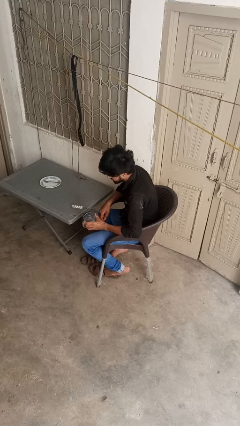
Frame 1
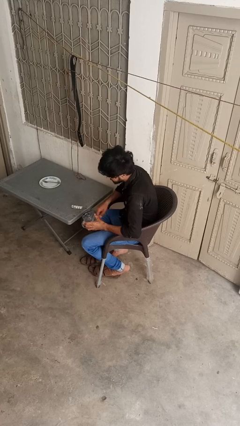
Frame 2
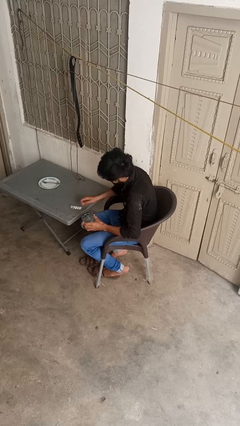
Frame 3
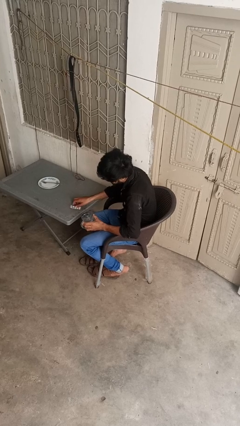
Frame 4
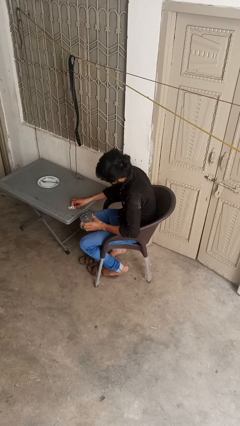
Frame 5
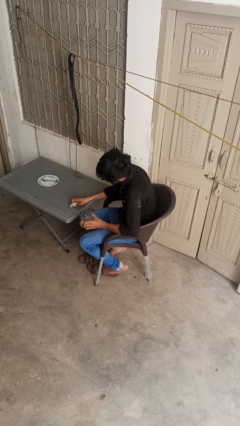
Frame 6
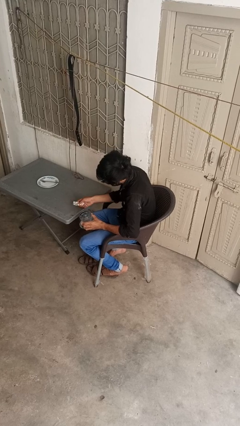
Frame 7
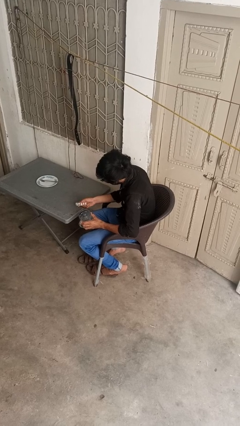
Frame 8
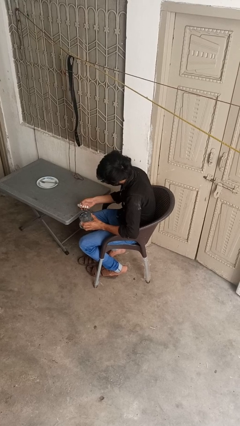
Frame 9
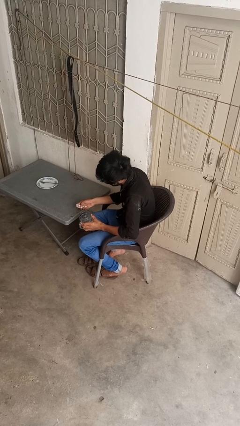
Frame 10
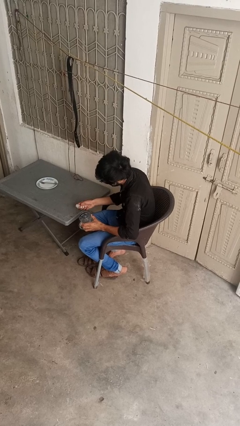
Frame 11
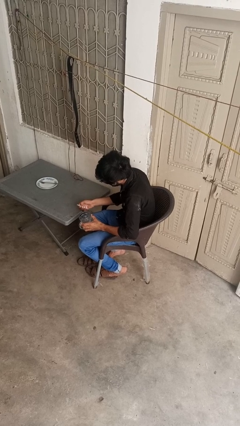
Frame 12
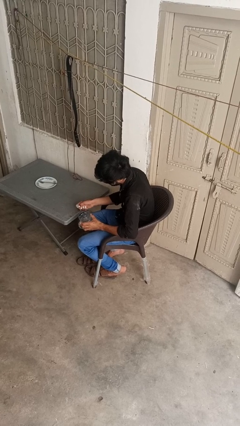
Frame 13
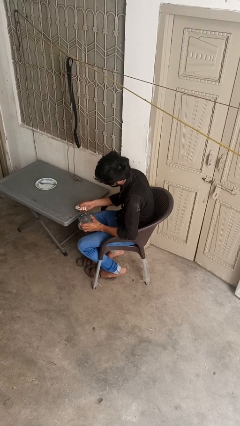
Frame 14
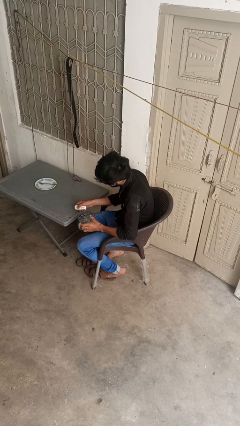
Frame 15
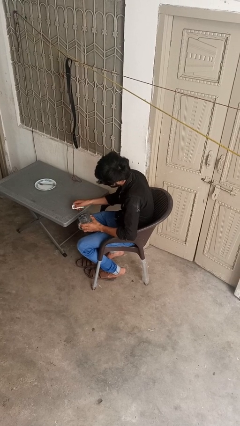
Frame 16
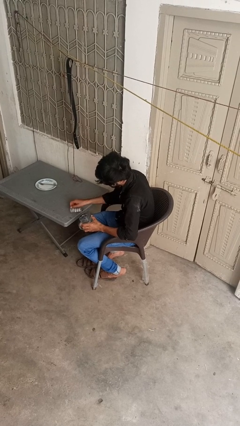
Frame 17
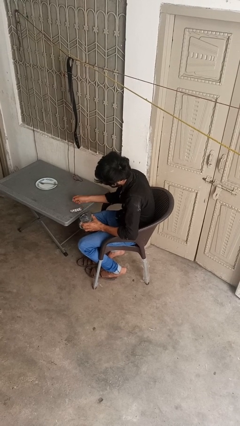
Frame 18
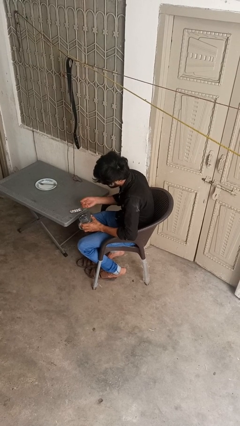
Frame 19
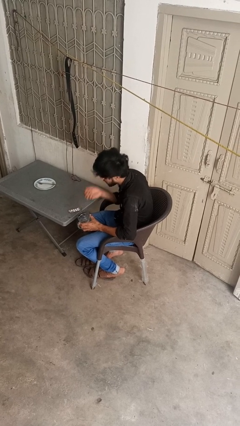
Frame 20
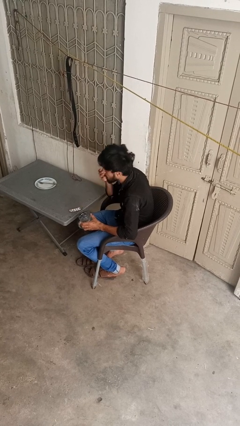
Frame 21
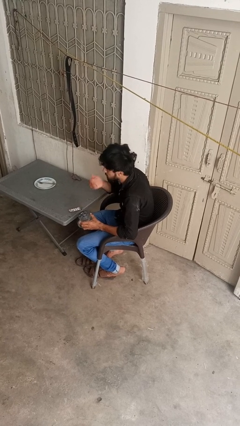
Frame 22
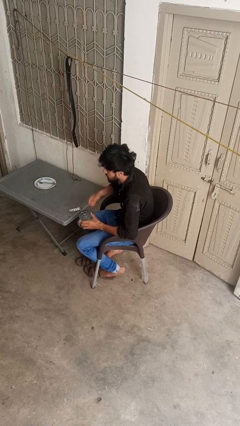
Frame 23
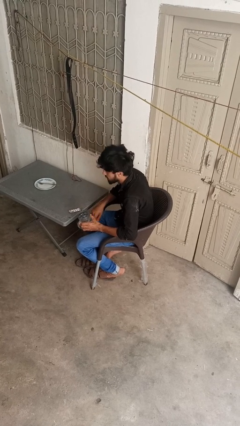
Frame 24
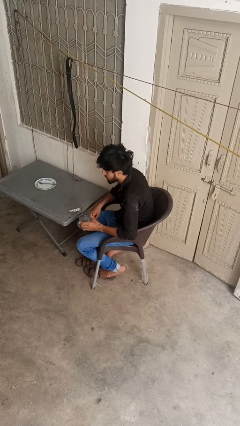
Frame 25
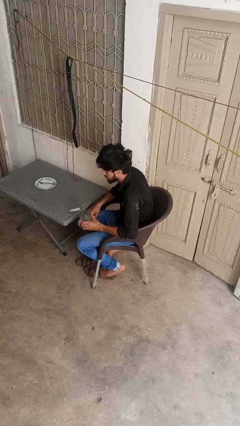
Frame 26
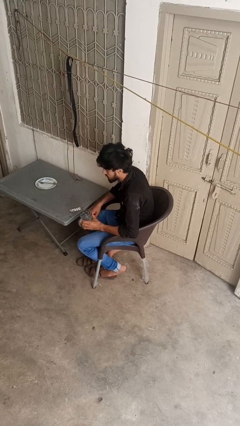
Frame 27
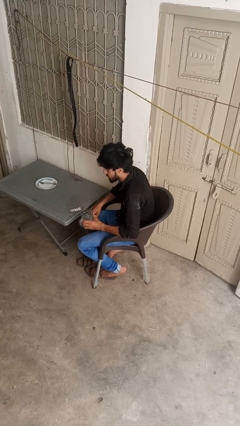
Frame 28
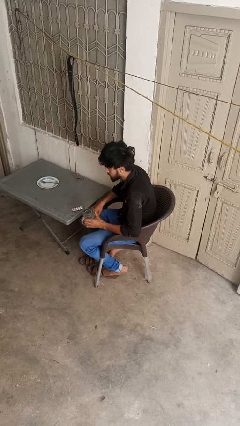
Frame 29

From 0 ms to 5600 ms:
person takes medicine pills

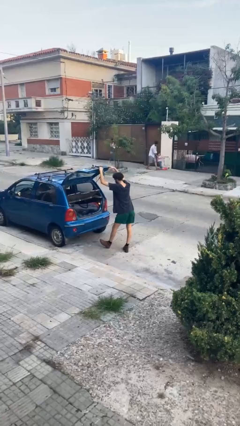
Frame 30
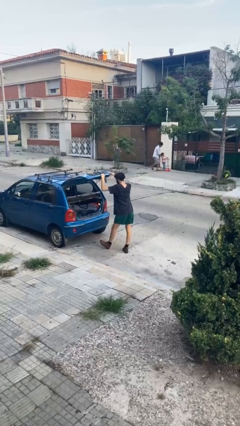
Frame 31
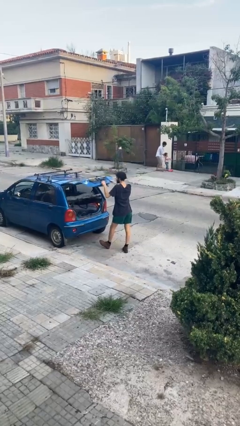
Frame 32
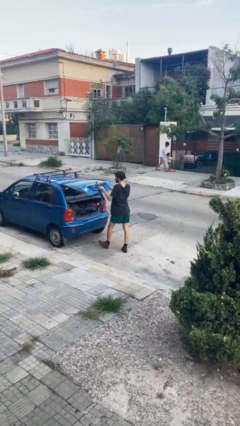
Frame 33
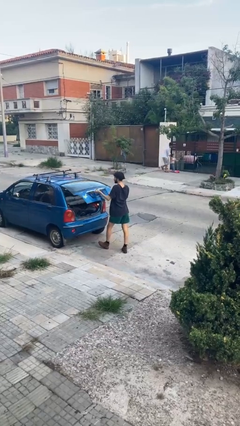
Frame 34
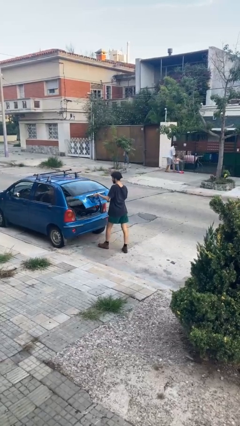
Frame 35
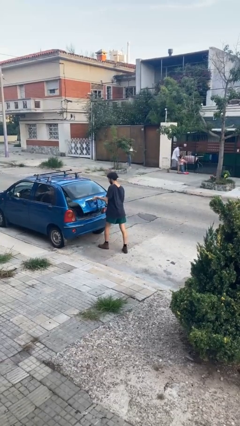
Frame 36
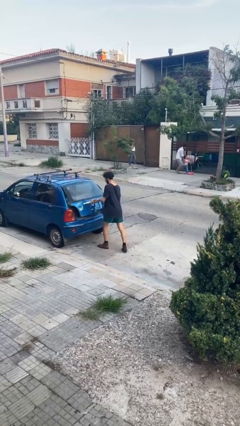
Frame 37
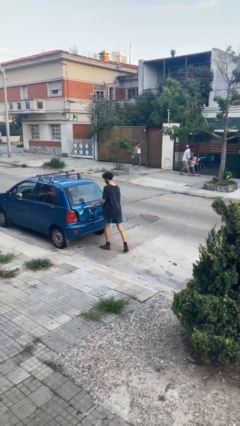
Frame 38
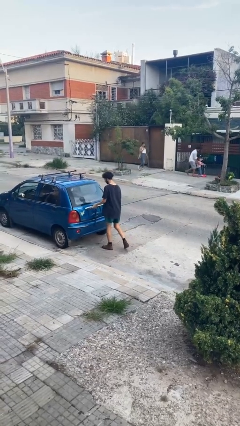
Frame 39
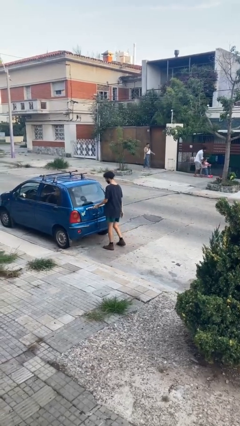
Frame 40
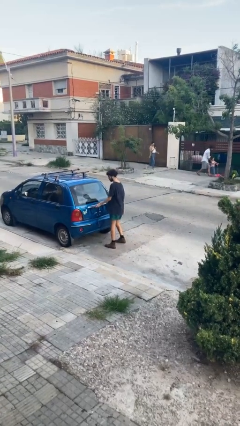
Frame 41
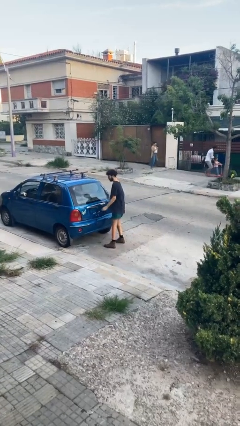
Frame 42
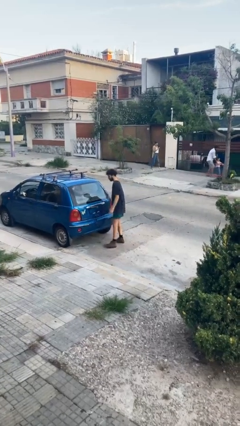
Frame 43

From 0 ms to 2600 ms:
person closes car trunk

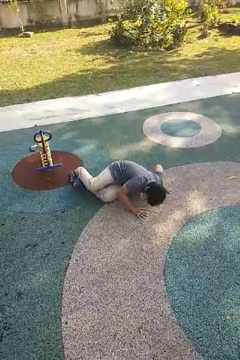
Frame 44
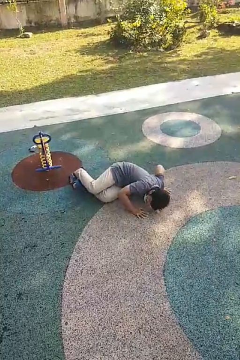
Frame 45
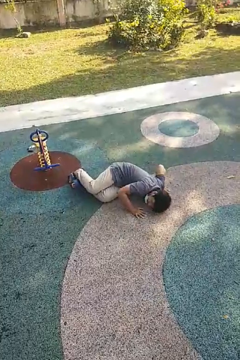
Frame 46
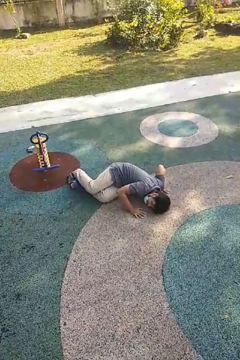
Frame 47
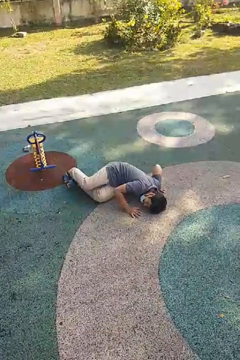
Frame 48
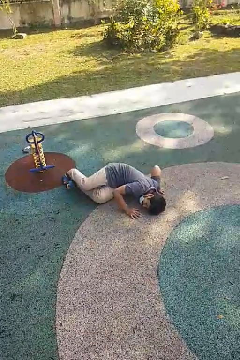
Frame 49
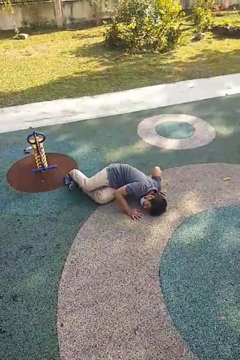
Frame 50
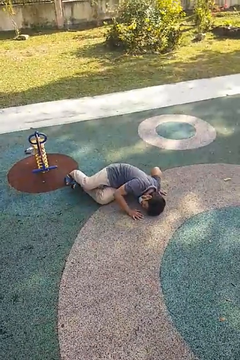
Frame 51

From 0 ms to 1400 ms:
person lies down on floor

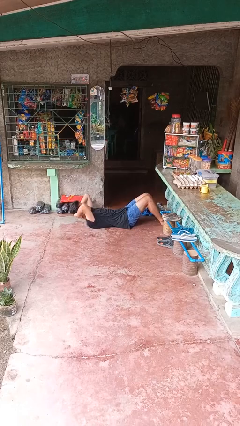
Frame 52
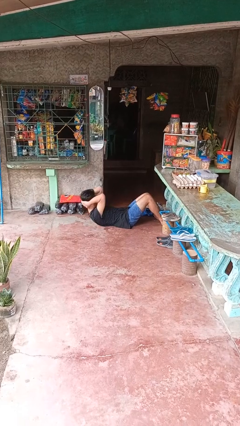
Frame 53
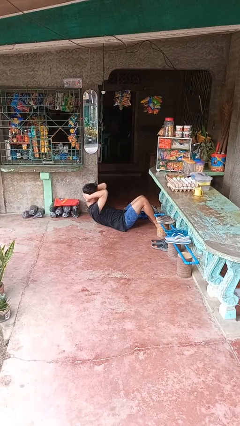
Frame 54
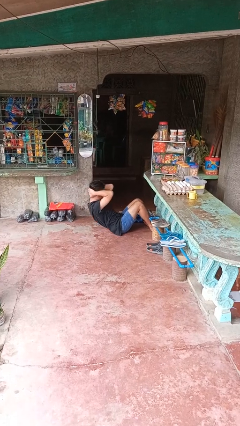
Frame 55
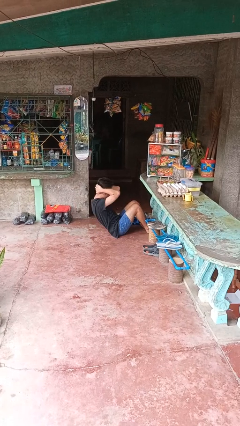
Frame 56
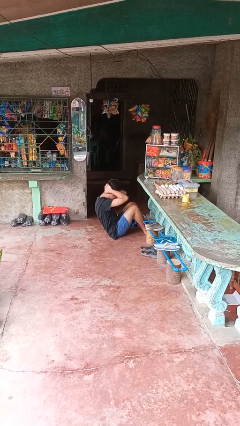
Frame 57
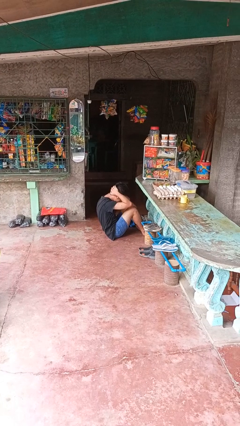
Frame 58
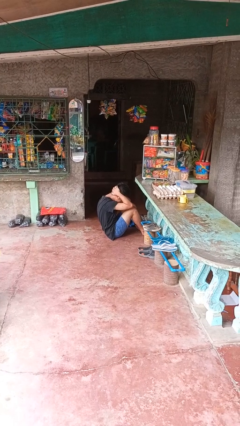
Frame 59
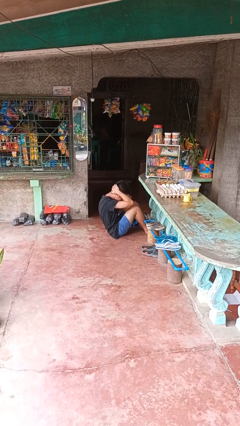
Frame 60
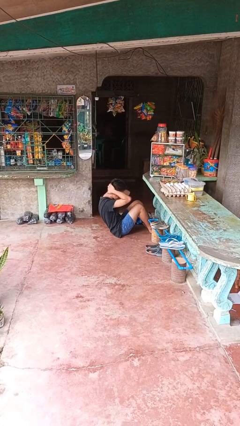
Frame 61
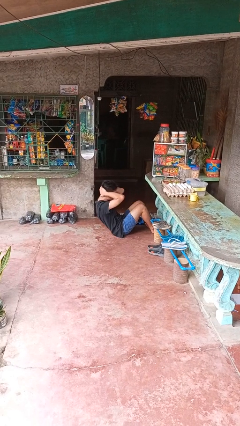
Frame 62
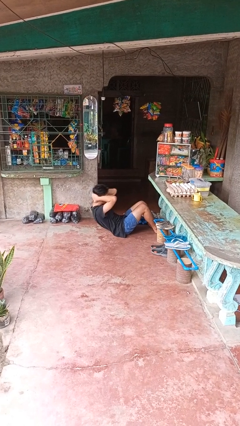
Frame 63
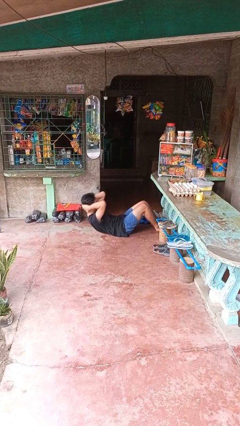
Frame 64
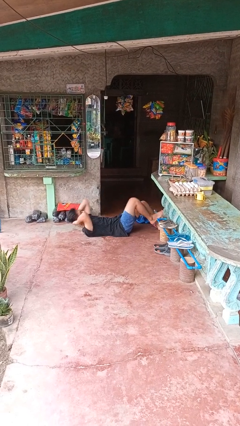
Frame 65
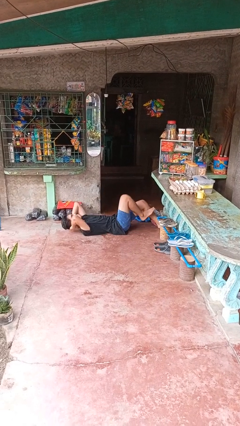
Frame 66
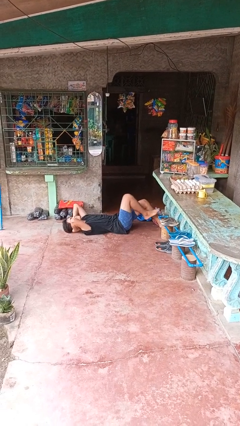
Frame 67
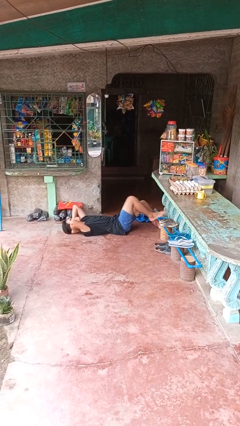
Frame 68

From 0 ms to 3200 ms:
person exercises with situp

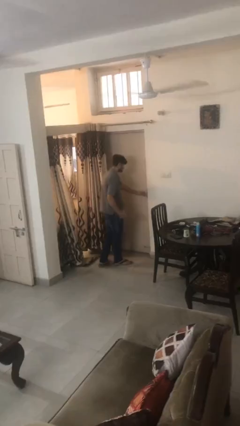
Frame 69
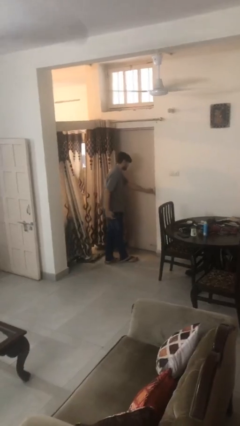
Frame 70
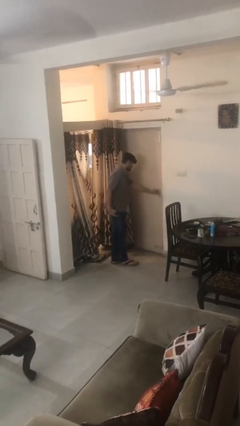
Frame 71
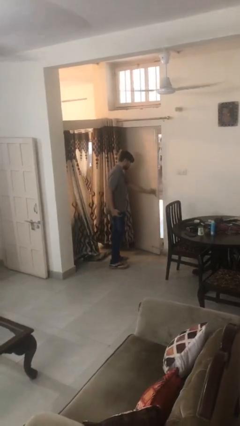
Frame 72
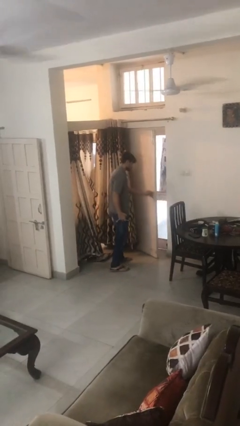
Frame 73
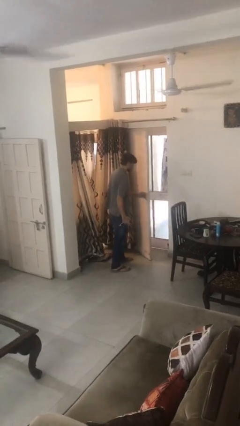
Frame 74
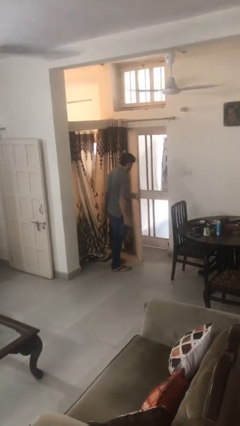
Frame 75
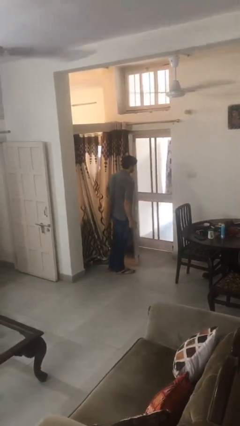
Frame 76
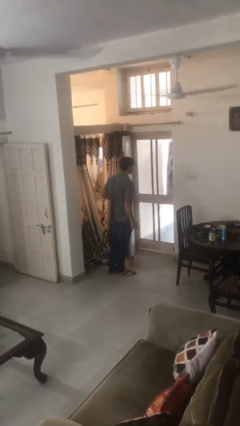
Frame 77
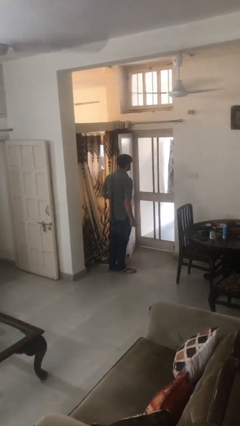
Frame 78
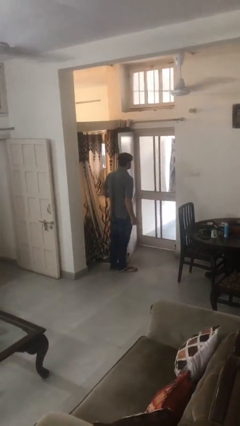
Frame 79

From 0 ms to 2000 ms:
person opens facility door

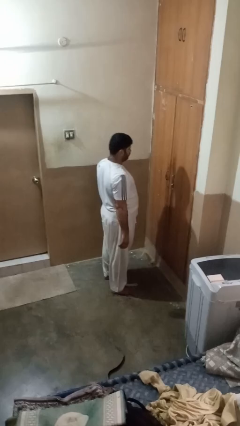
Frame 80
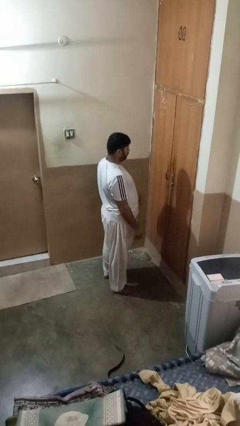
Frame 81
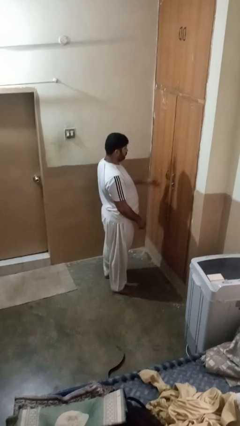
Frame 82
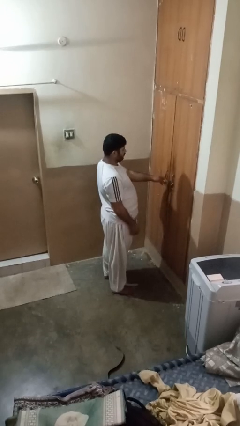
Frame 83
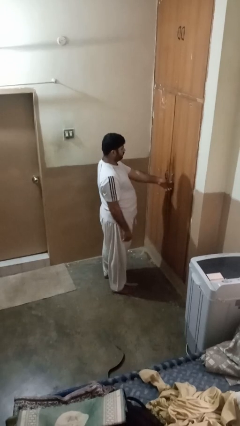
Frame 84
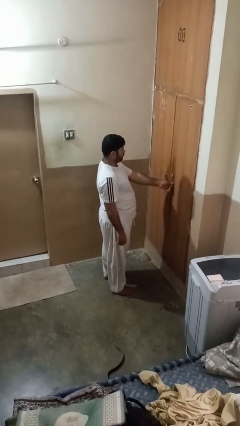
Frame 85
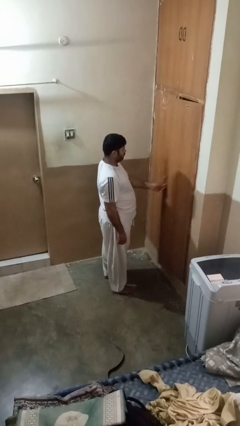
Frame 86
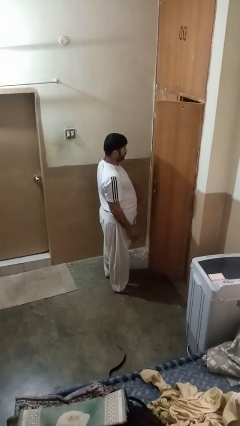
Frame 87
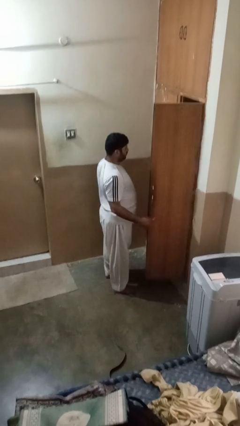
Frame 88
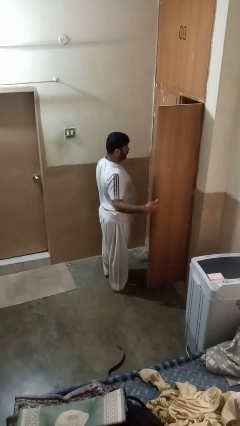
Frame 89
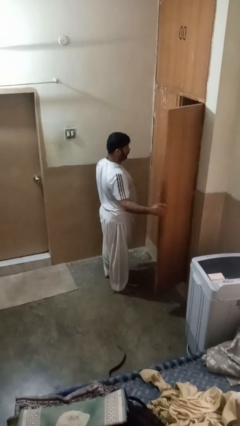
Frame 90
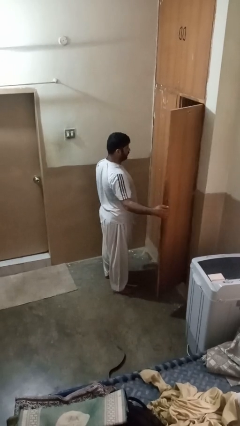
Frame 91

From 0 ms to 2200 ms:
person opens closet door
